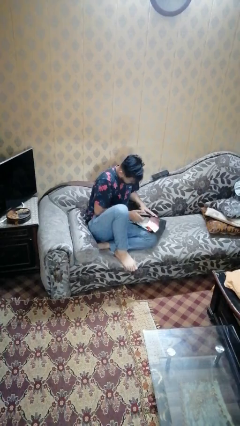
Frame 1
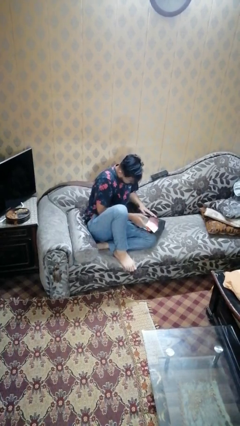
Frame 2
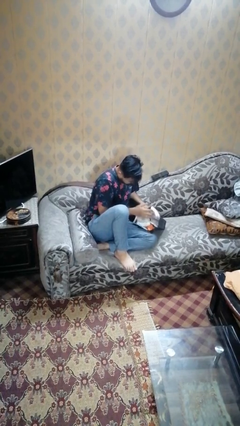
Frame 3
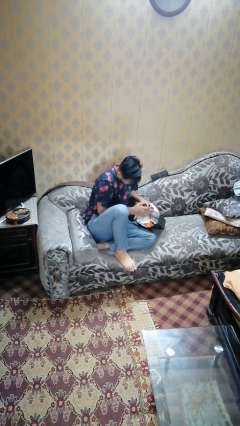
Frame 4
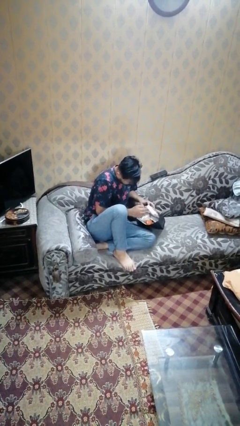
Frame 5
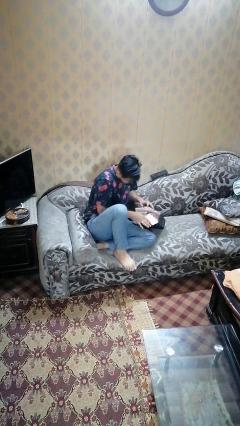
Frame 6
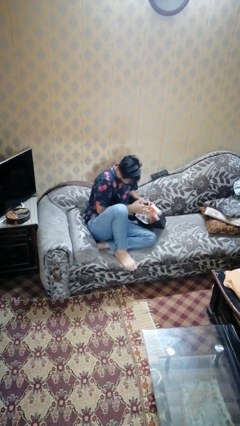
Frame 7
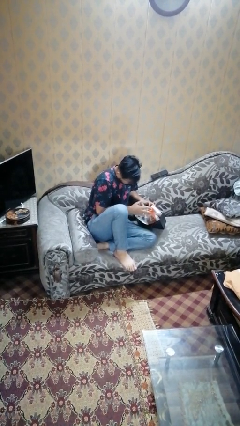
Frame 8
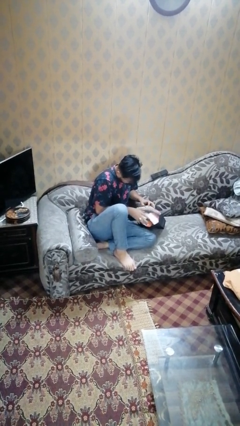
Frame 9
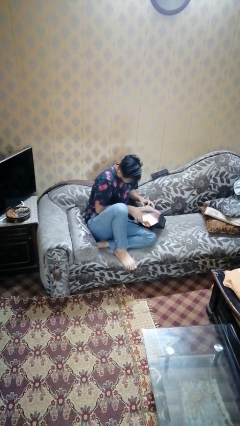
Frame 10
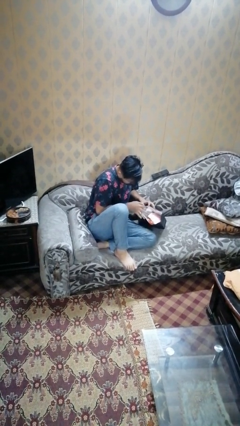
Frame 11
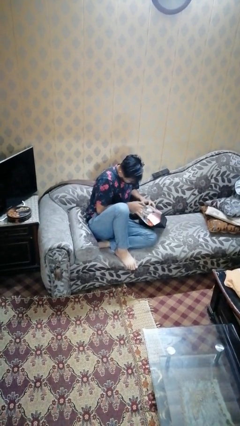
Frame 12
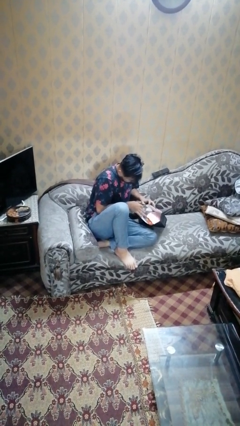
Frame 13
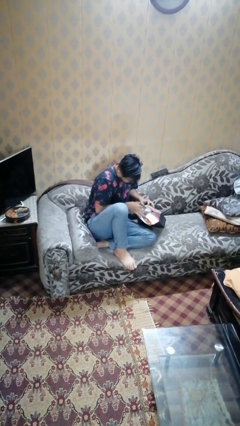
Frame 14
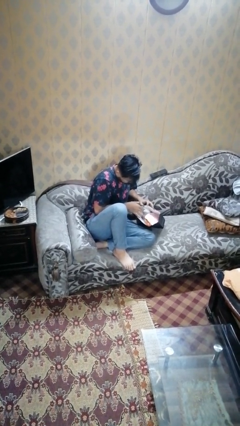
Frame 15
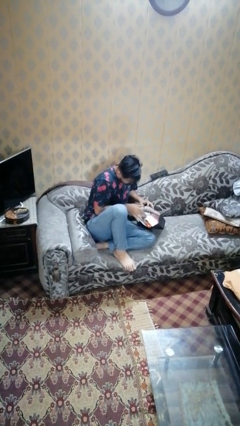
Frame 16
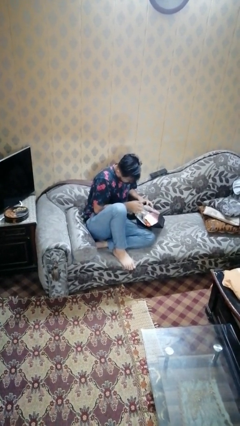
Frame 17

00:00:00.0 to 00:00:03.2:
person searches in bag

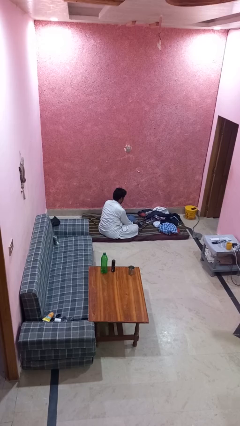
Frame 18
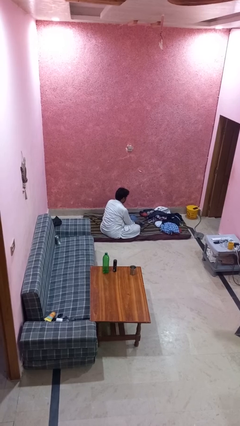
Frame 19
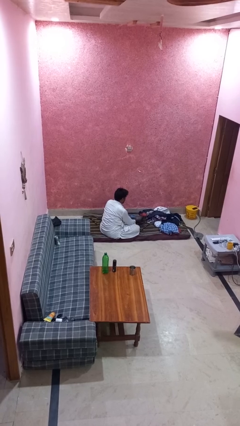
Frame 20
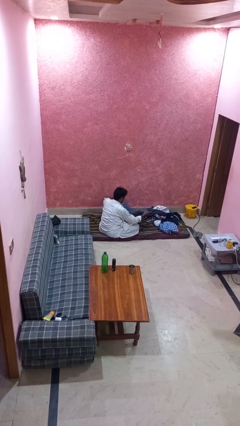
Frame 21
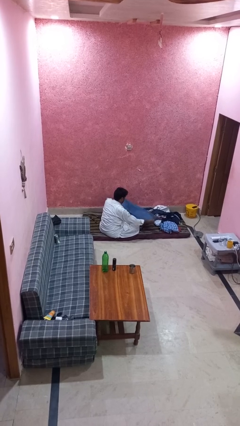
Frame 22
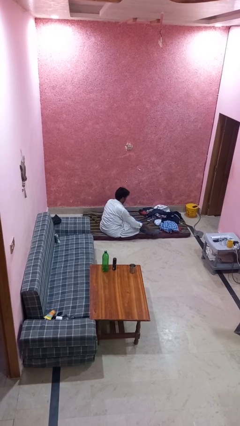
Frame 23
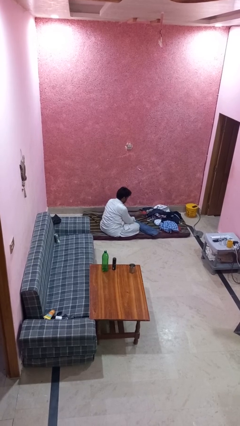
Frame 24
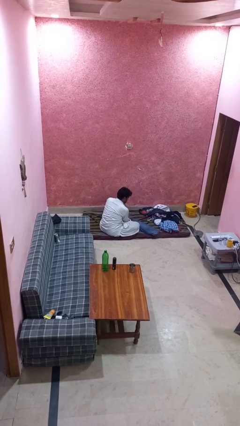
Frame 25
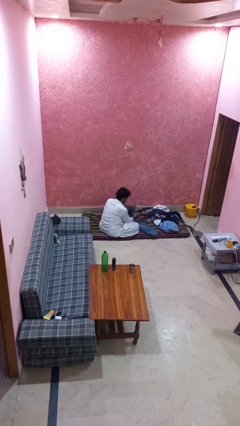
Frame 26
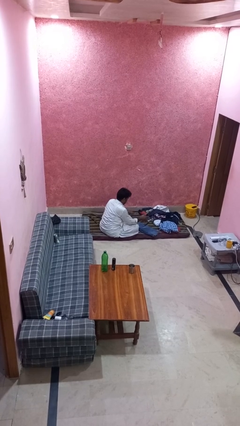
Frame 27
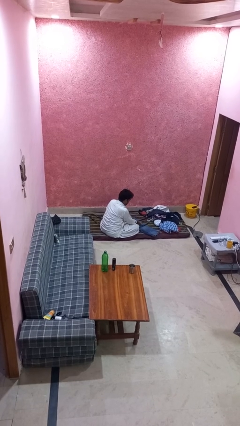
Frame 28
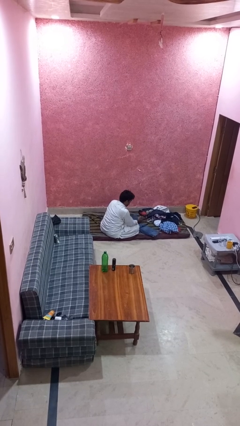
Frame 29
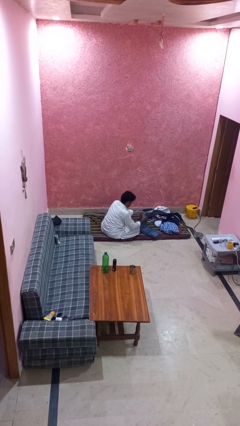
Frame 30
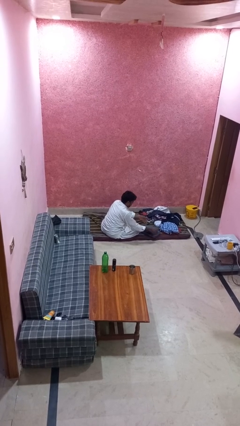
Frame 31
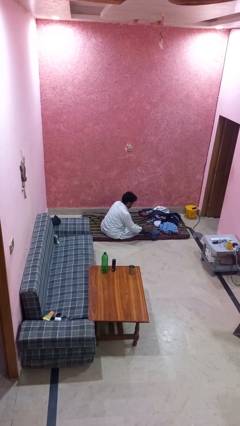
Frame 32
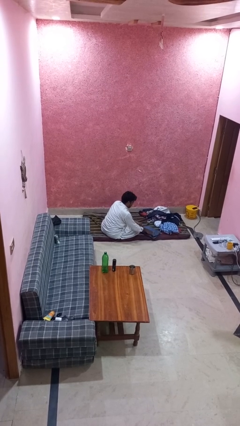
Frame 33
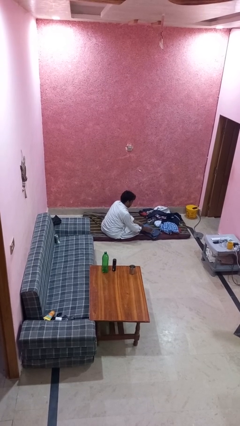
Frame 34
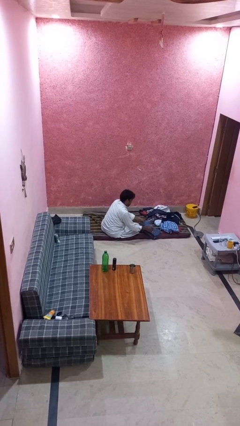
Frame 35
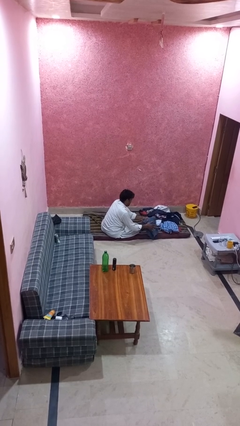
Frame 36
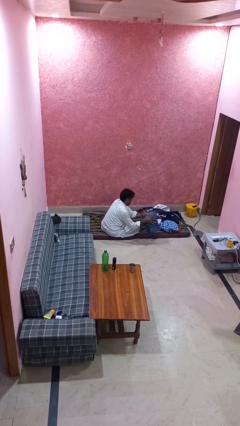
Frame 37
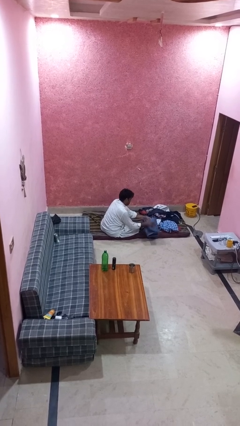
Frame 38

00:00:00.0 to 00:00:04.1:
person folds pants

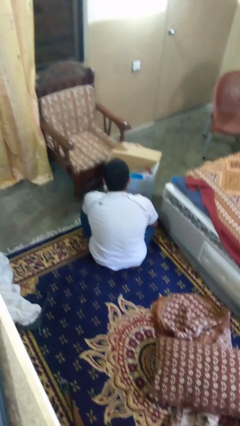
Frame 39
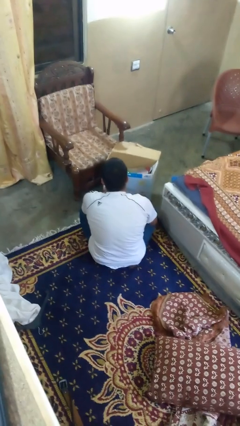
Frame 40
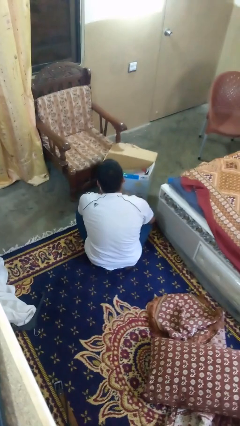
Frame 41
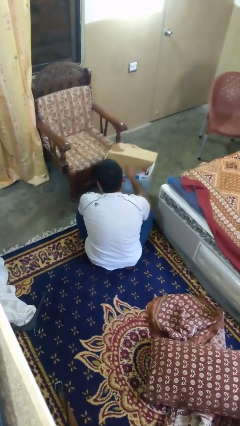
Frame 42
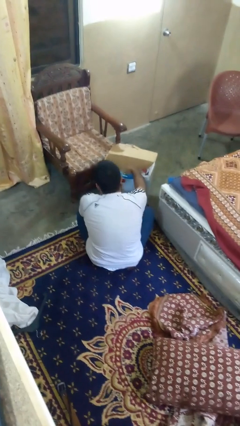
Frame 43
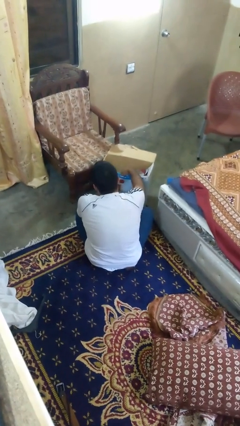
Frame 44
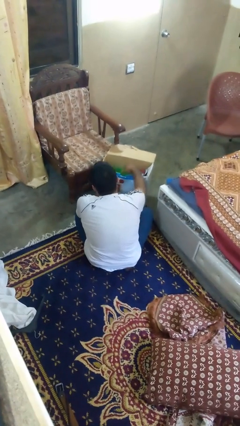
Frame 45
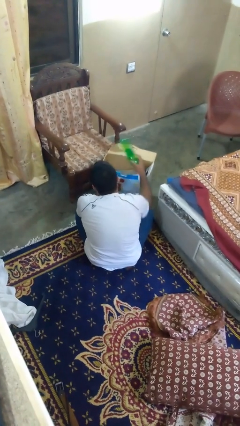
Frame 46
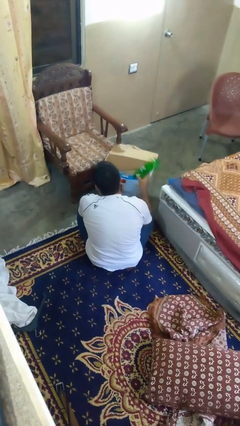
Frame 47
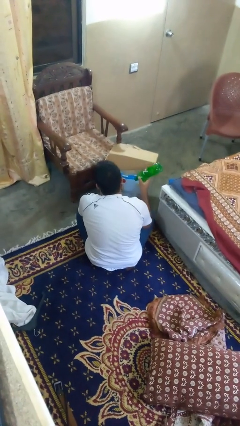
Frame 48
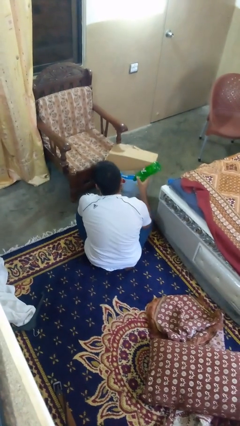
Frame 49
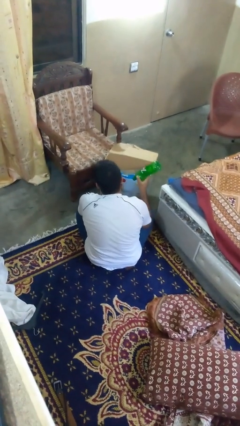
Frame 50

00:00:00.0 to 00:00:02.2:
person takes object from box

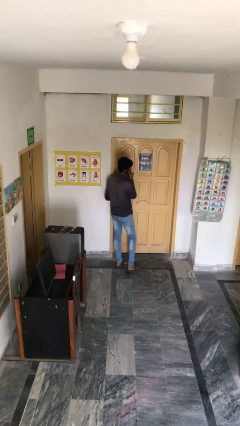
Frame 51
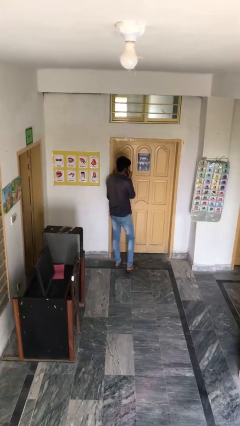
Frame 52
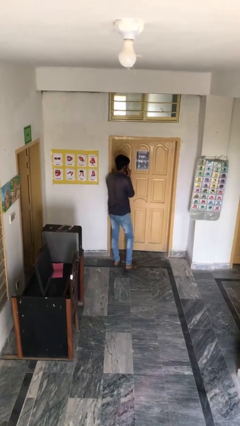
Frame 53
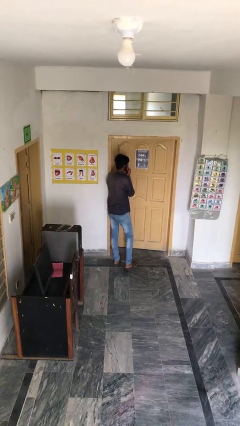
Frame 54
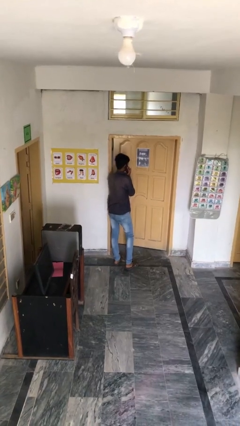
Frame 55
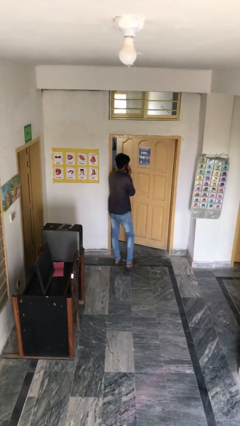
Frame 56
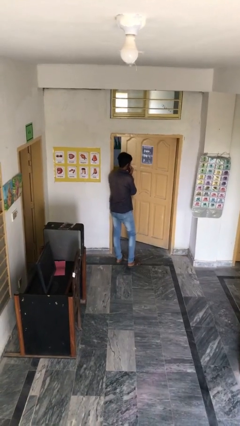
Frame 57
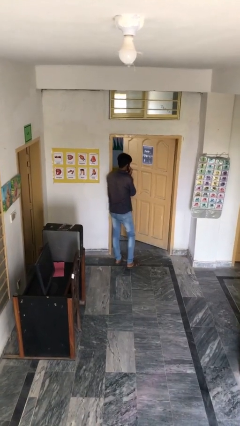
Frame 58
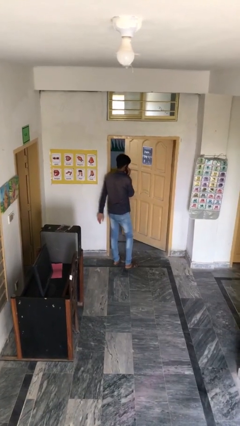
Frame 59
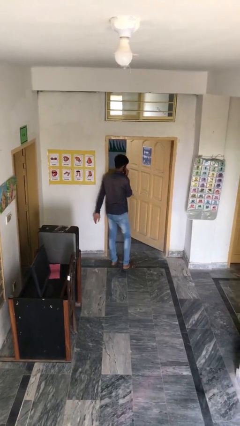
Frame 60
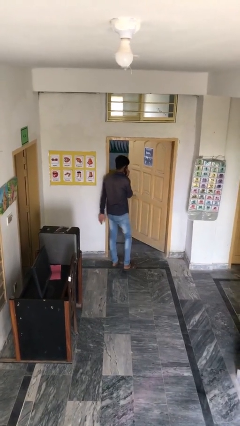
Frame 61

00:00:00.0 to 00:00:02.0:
person opens facility door

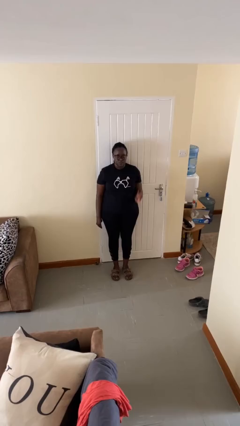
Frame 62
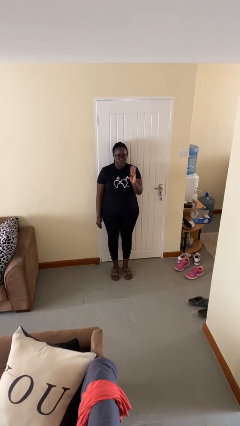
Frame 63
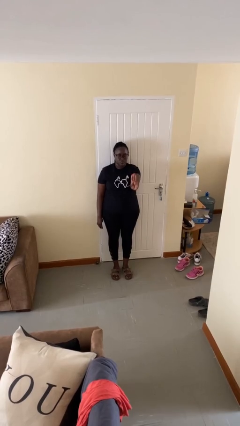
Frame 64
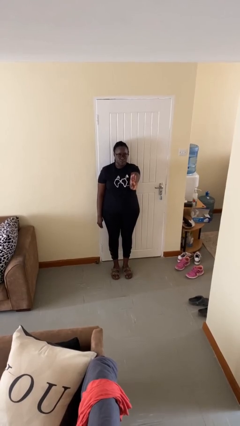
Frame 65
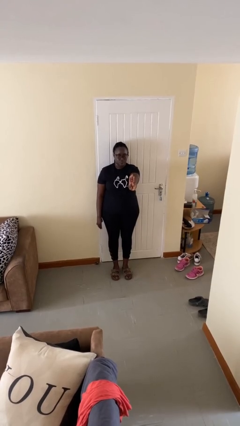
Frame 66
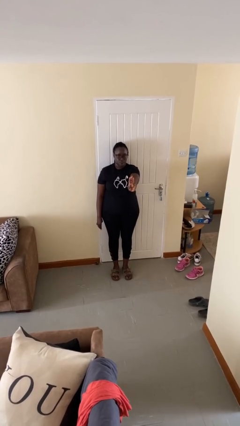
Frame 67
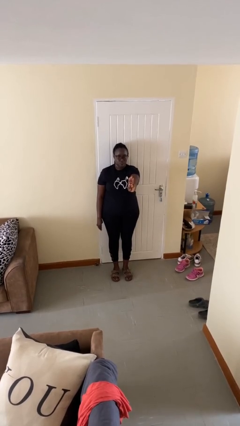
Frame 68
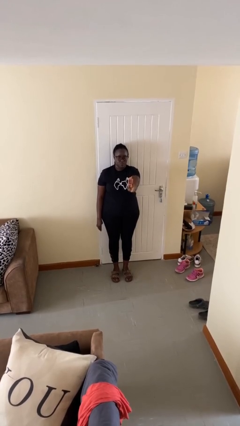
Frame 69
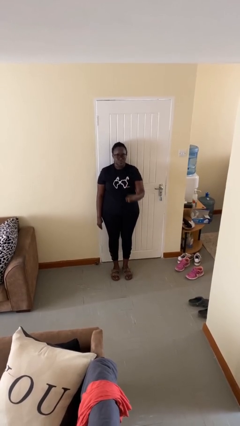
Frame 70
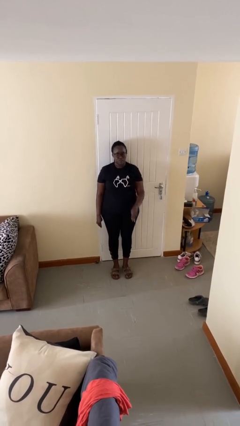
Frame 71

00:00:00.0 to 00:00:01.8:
person gestures number three

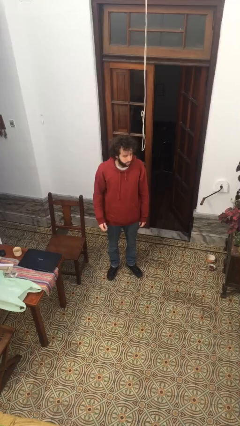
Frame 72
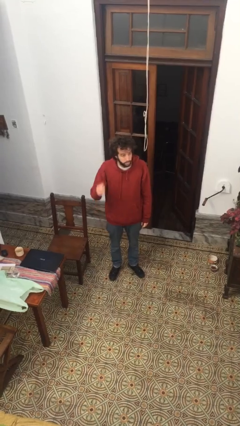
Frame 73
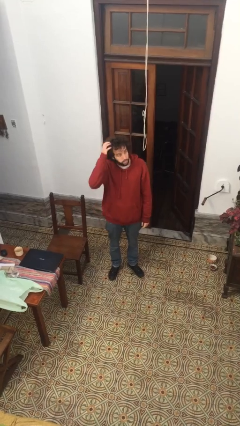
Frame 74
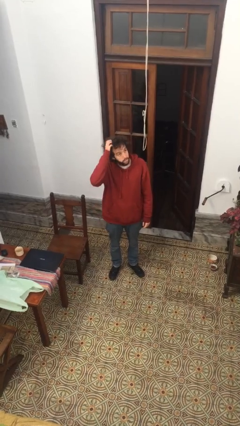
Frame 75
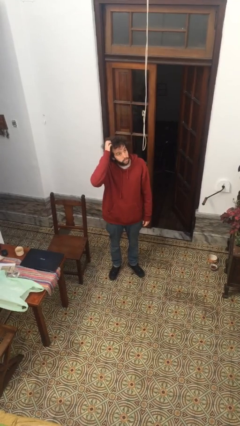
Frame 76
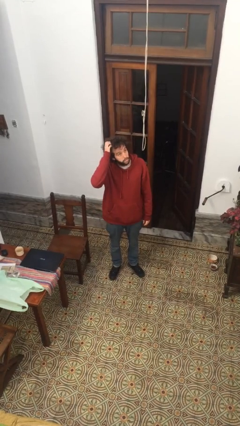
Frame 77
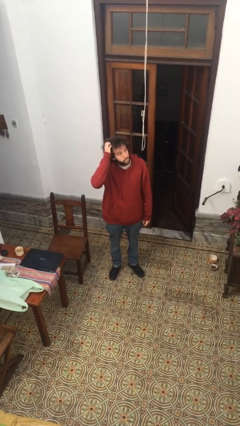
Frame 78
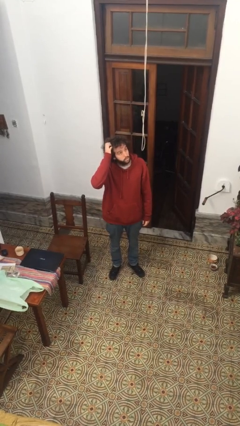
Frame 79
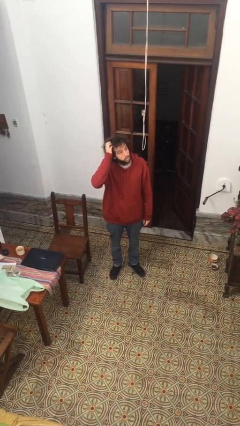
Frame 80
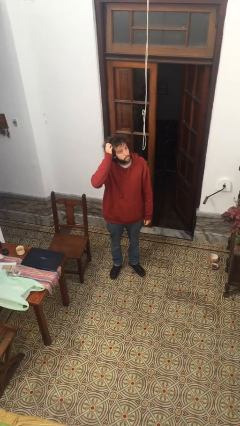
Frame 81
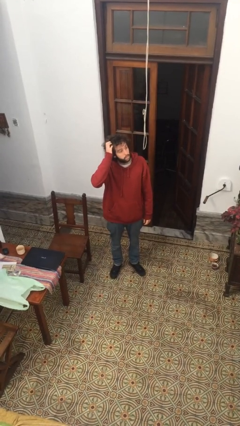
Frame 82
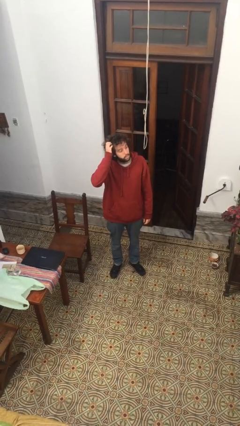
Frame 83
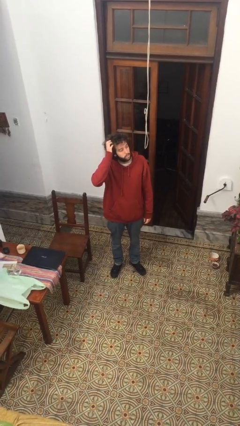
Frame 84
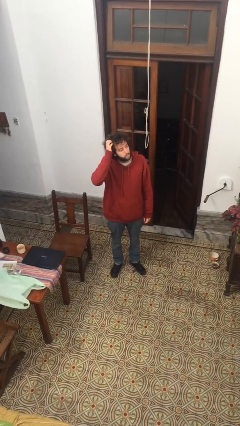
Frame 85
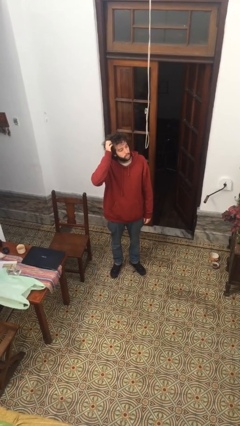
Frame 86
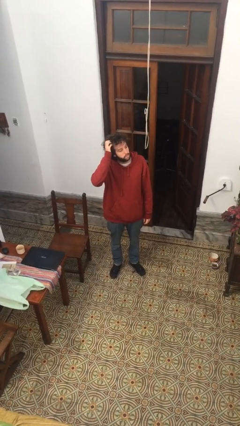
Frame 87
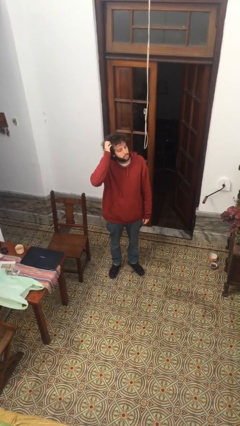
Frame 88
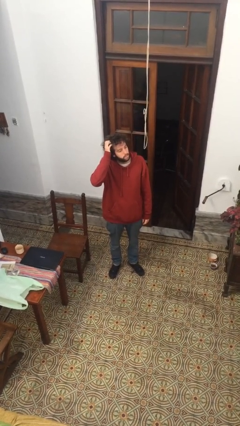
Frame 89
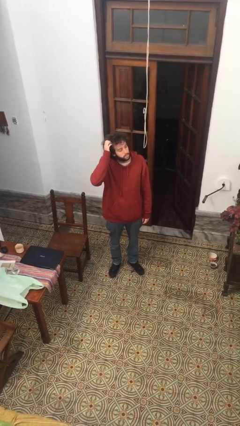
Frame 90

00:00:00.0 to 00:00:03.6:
person scratches face

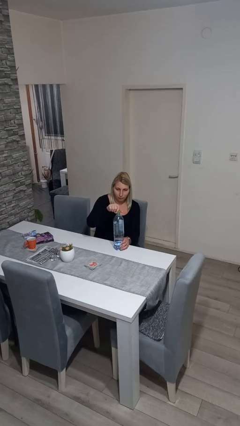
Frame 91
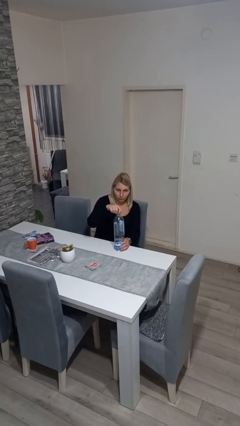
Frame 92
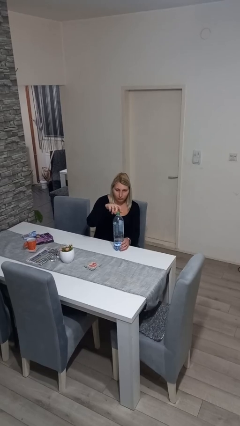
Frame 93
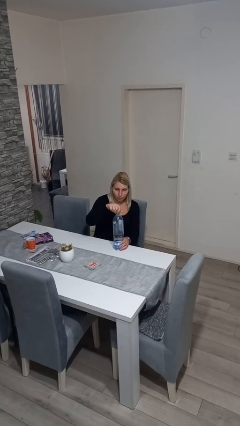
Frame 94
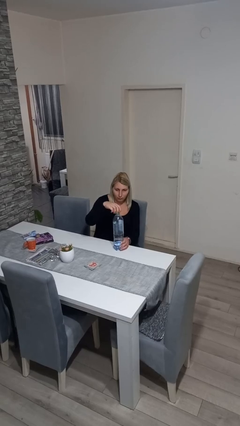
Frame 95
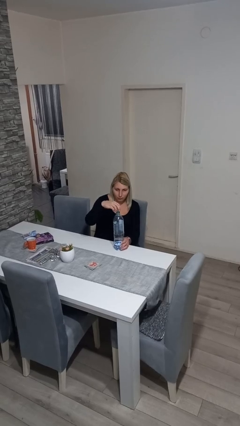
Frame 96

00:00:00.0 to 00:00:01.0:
person unscrews lid from bottle
